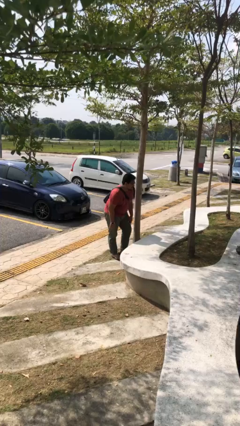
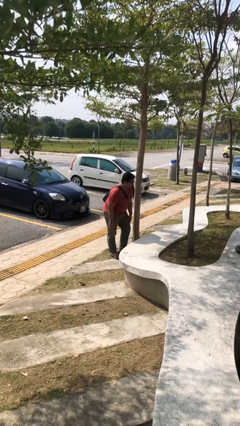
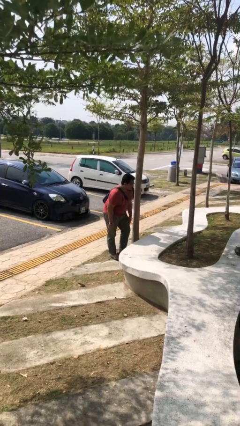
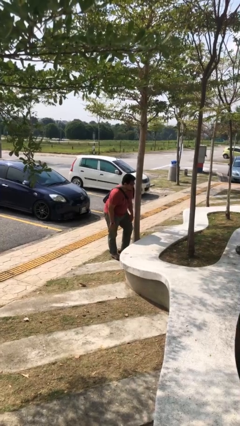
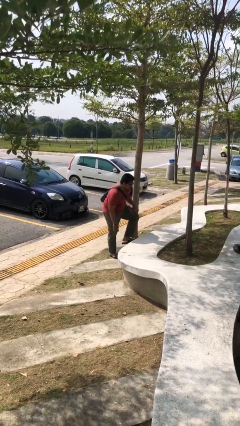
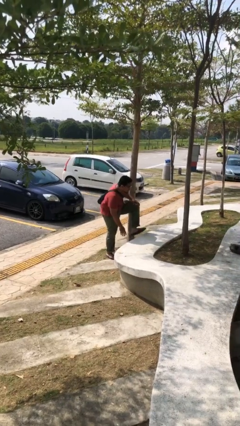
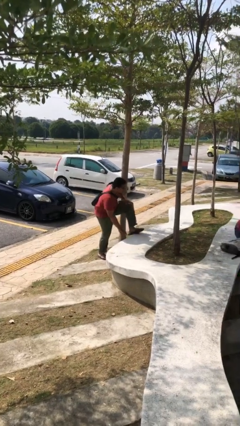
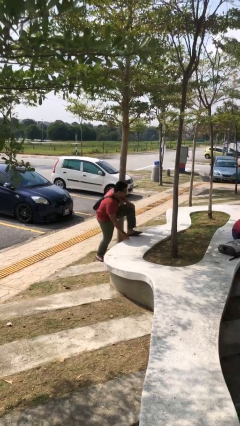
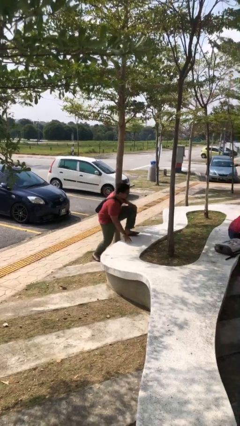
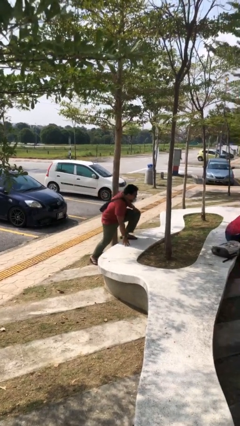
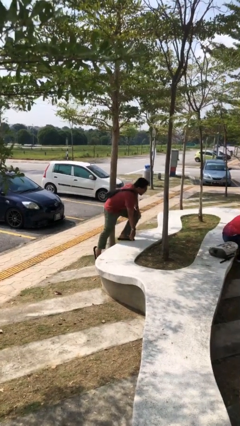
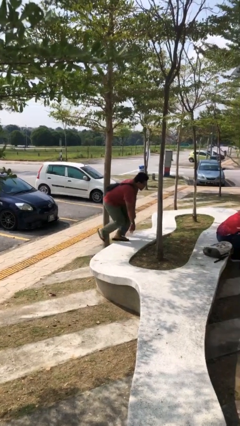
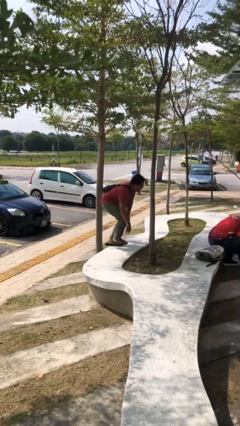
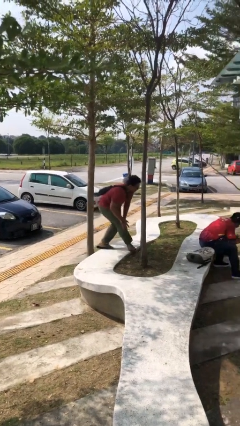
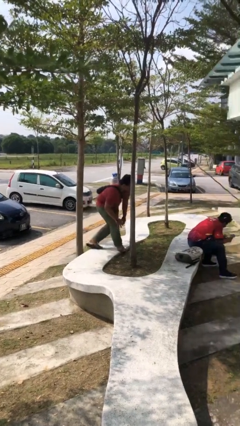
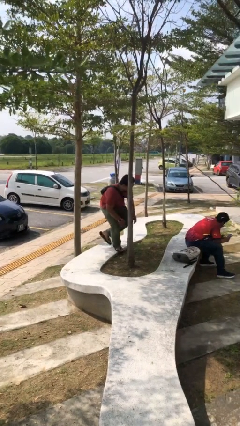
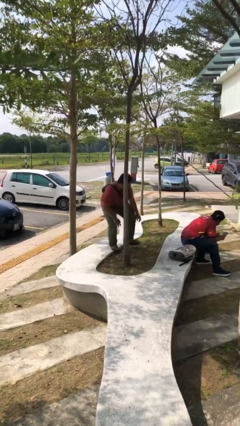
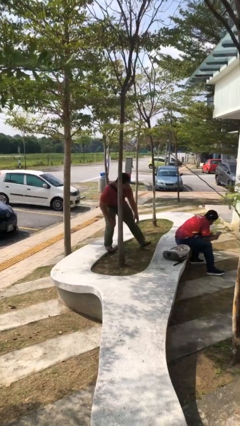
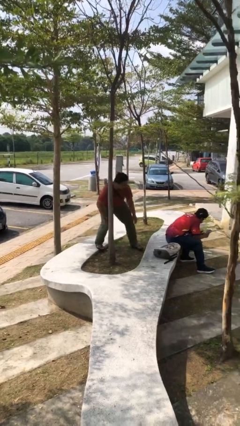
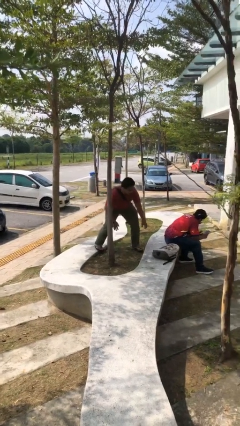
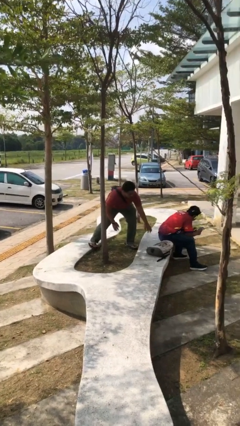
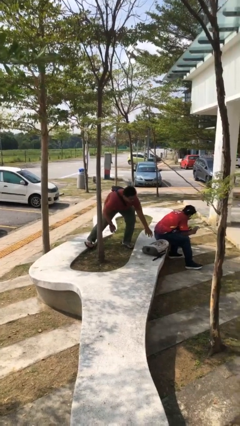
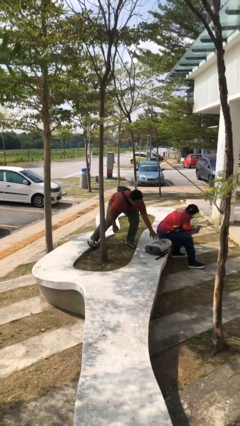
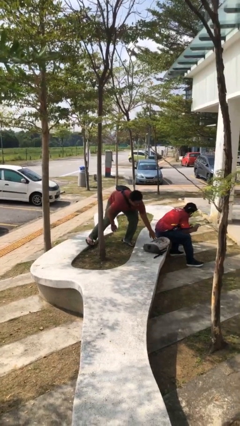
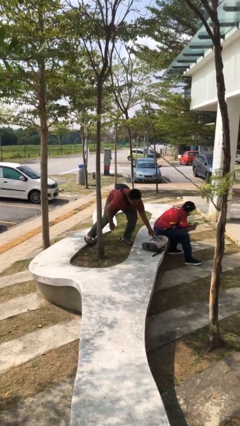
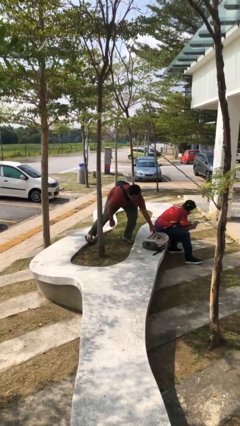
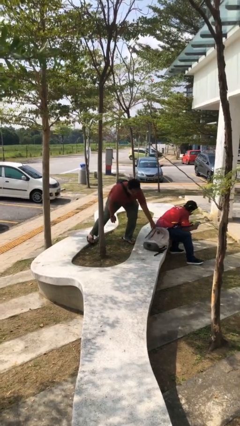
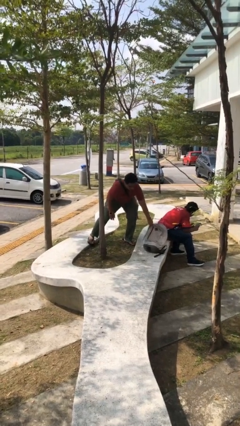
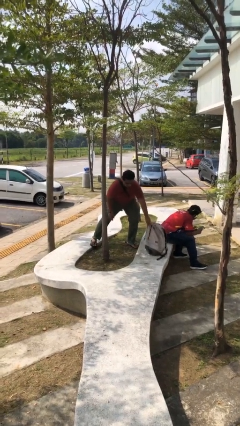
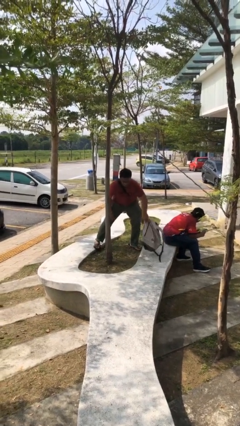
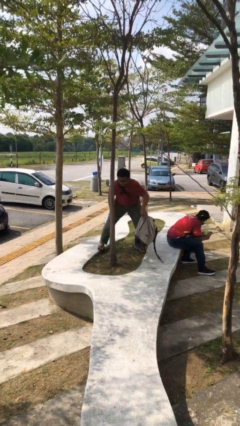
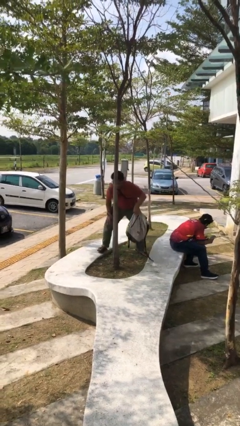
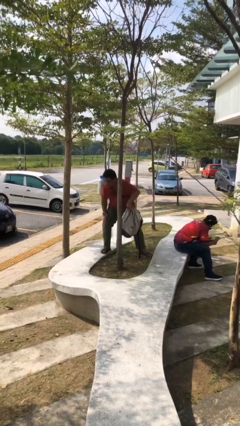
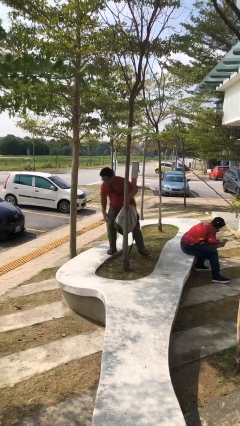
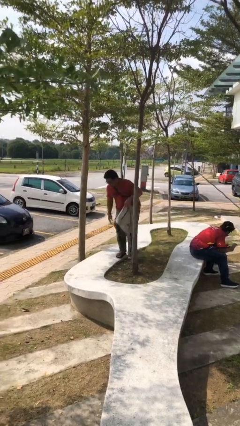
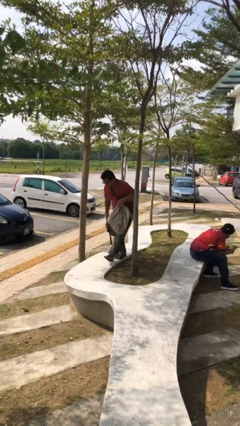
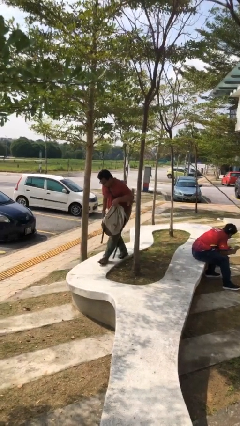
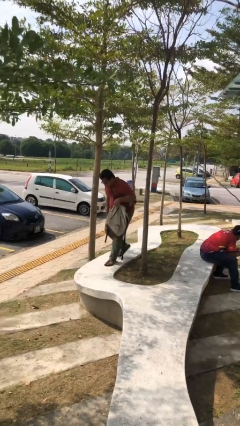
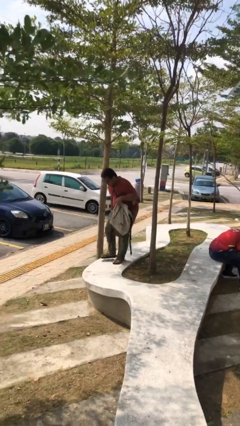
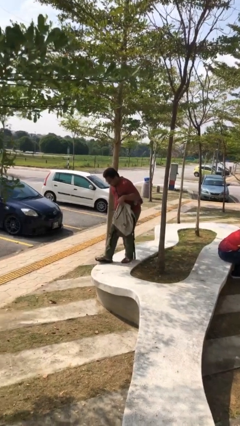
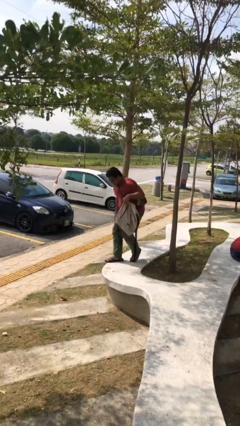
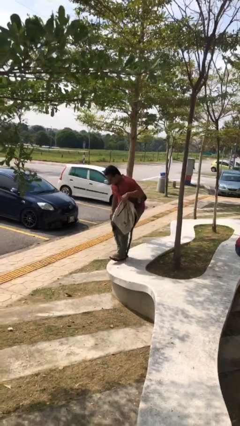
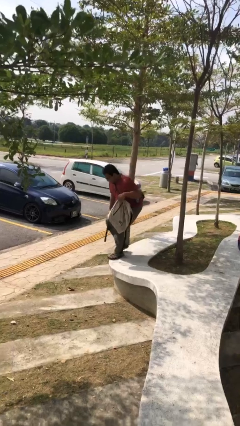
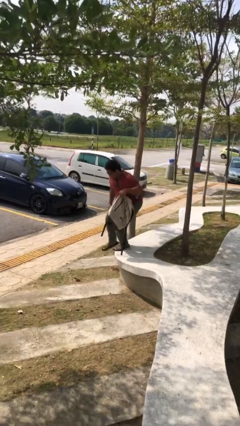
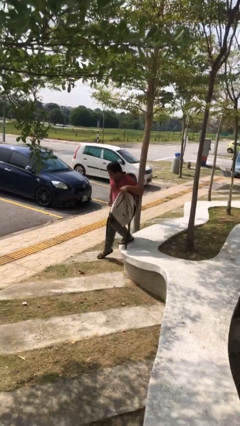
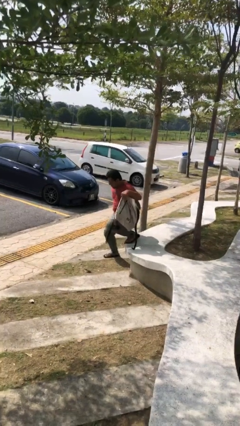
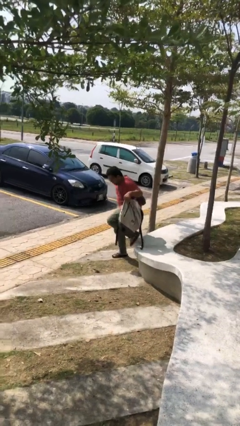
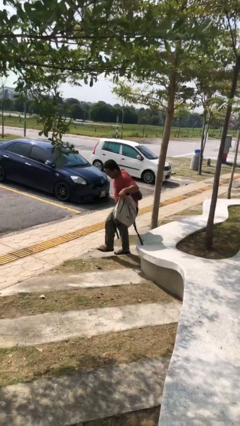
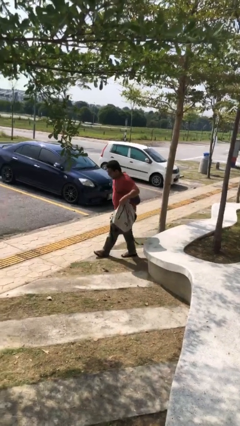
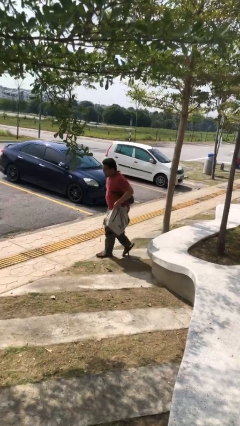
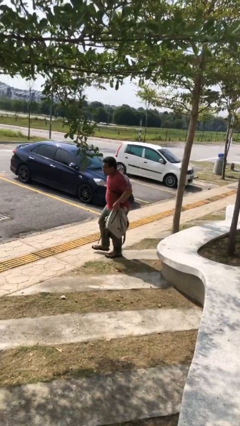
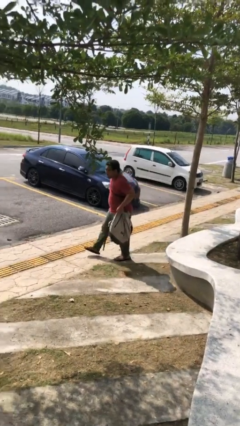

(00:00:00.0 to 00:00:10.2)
person steals object from person

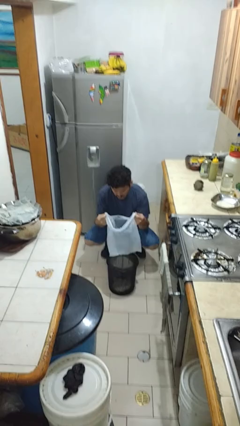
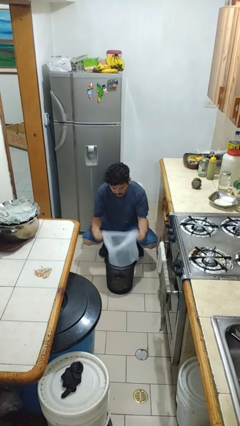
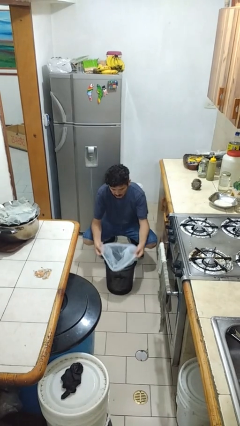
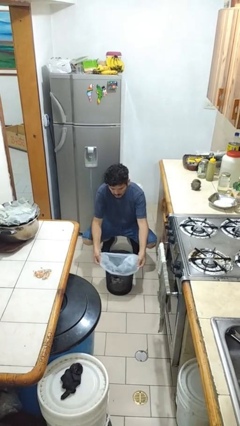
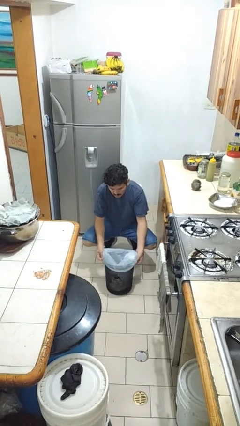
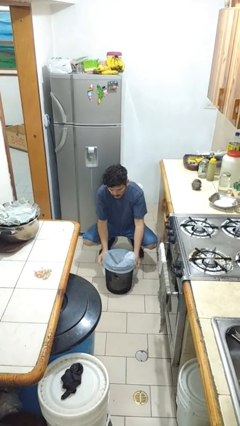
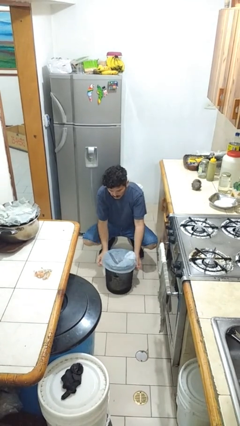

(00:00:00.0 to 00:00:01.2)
person inserts trashbag into trashcan

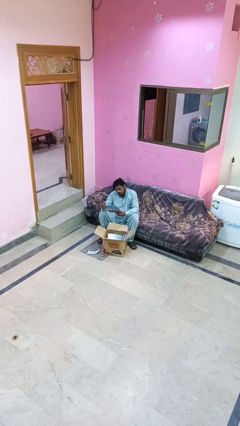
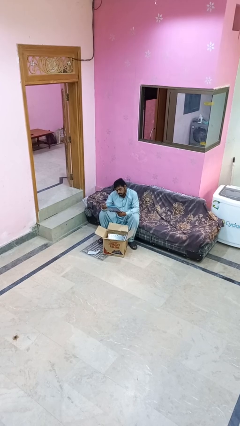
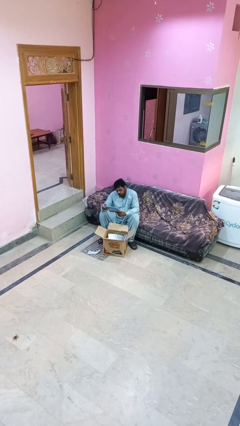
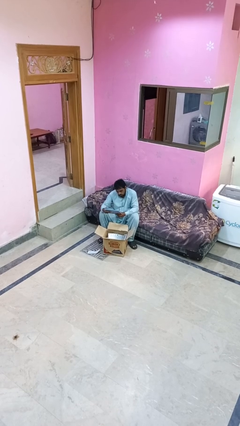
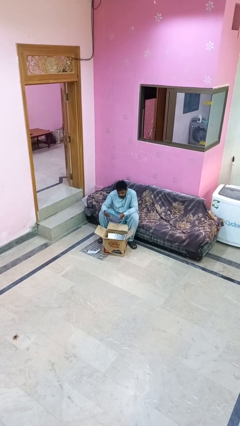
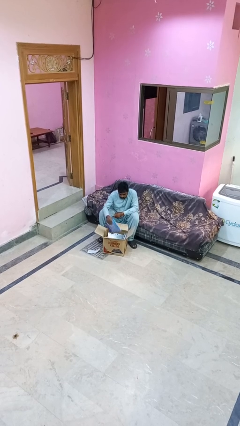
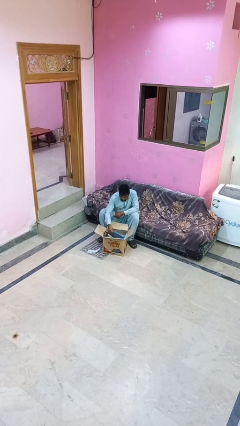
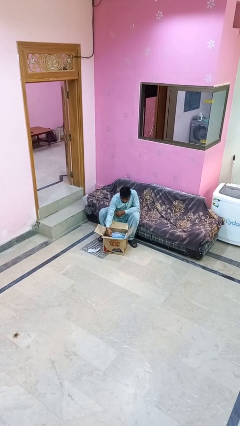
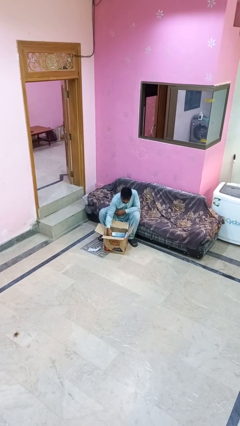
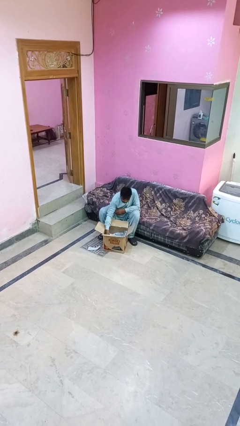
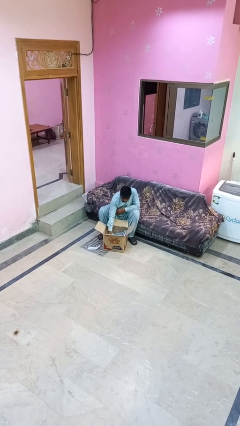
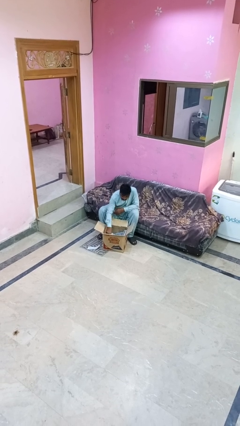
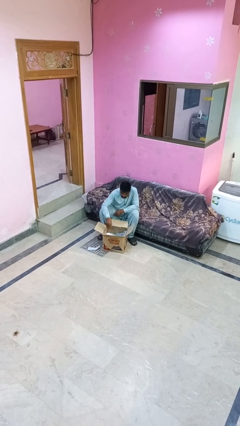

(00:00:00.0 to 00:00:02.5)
person puts object into box

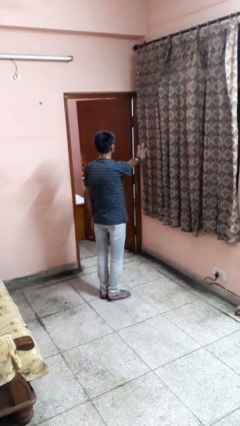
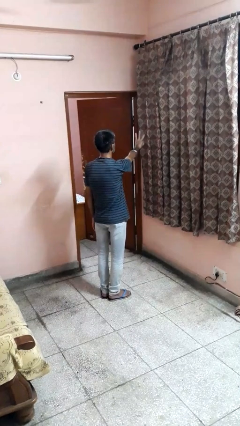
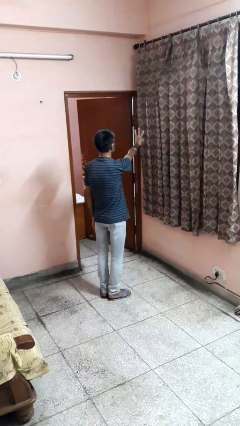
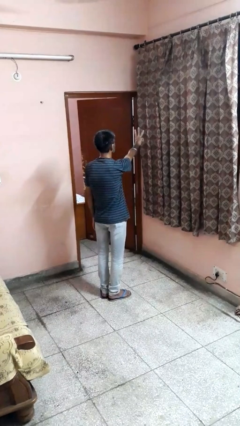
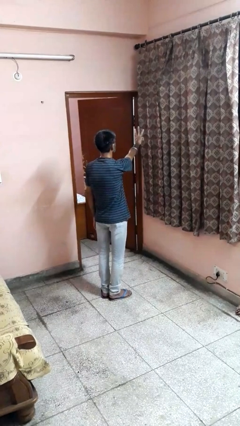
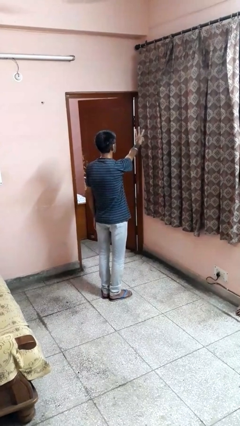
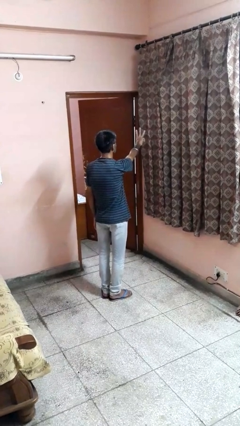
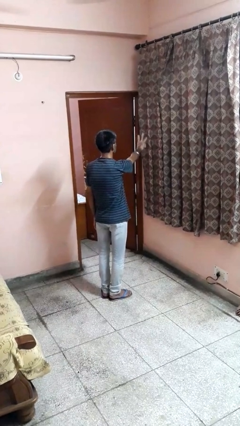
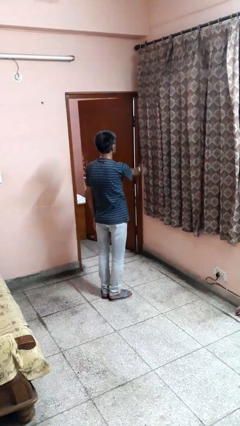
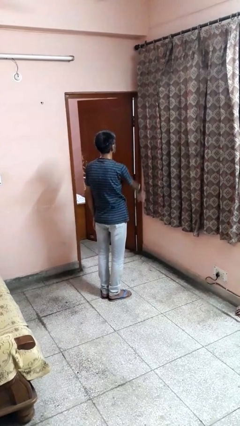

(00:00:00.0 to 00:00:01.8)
person gestures number three

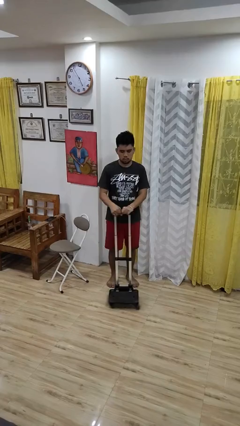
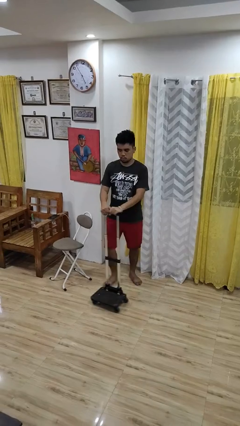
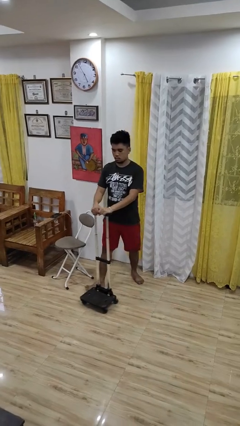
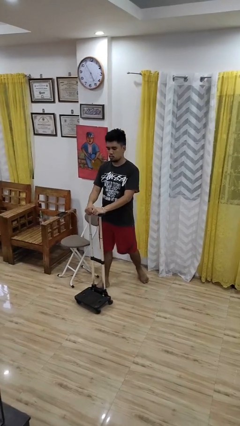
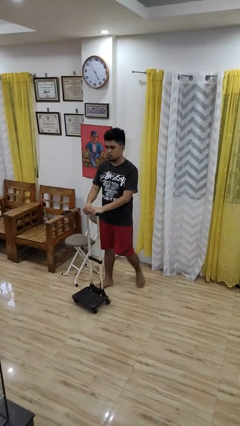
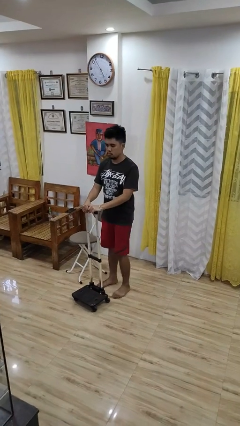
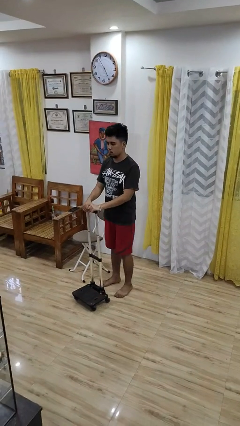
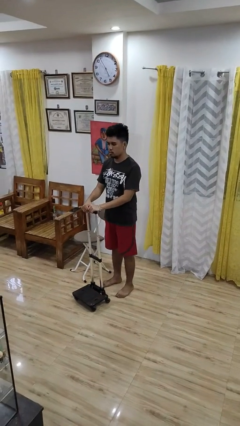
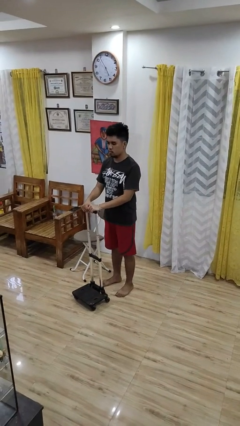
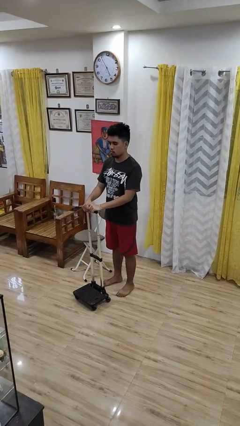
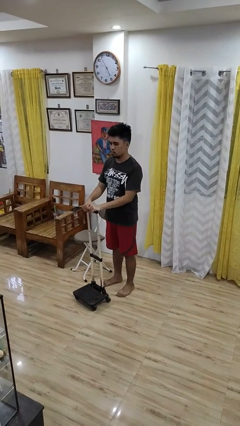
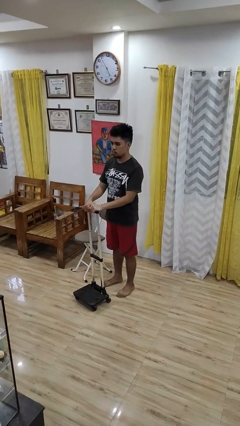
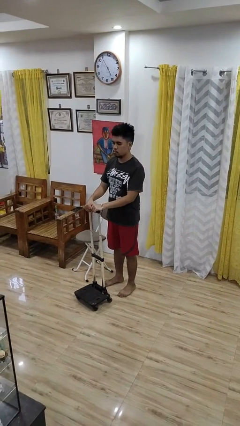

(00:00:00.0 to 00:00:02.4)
person pushes wheeled cart
